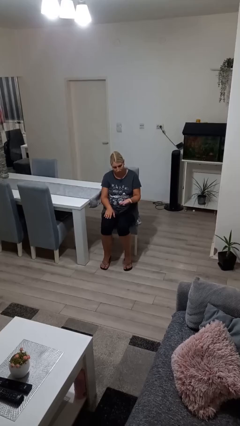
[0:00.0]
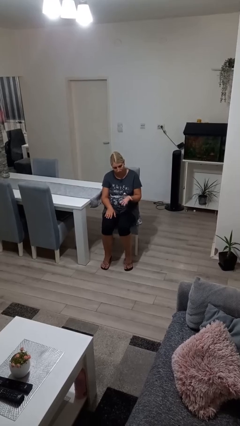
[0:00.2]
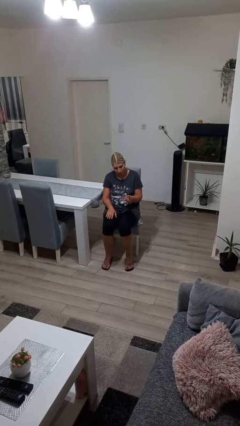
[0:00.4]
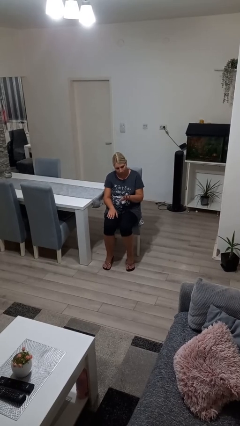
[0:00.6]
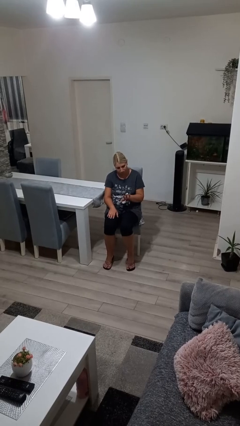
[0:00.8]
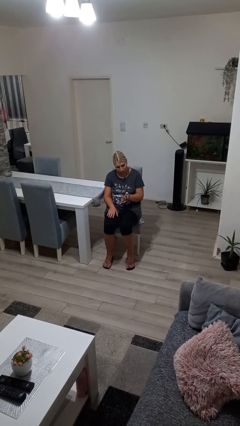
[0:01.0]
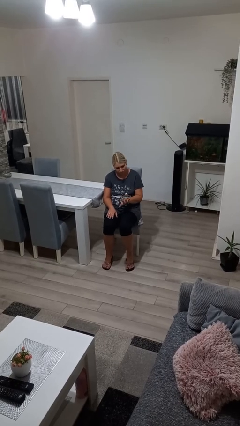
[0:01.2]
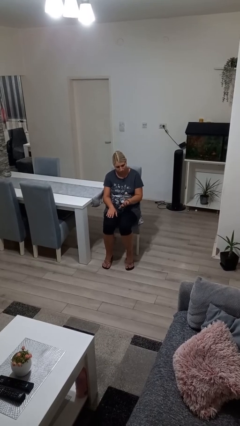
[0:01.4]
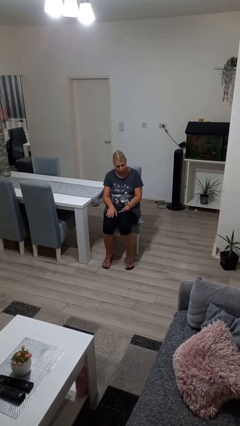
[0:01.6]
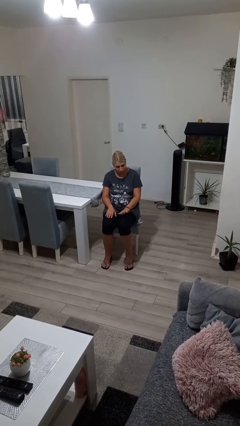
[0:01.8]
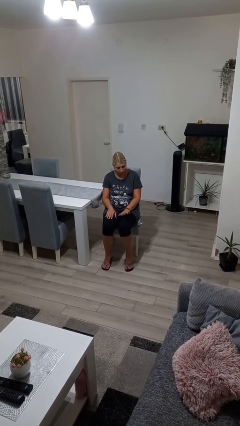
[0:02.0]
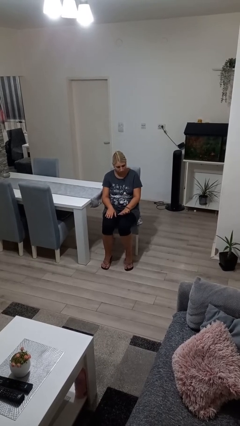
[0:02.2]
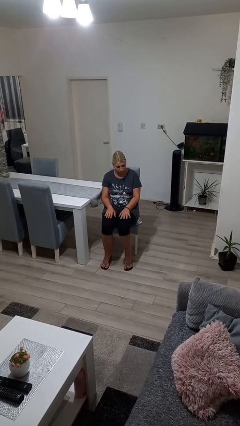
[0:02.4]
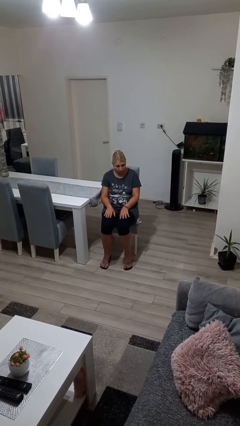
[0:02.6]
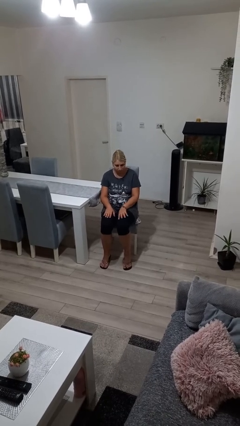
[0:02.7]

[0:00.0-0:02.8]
person looks at hands in lap

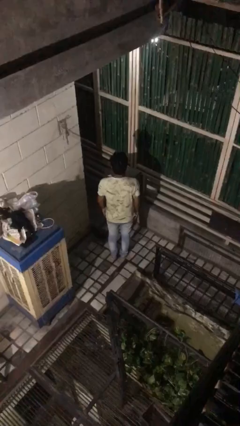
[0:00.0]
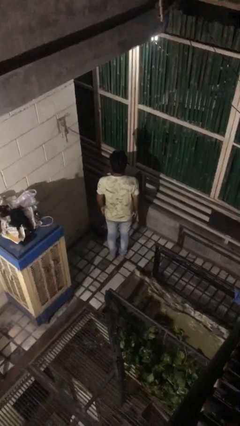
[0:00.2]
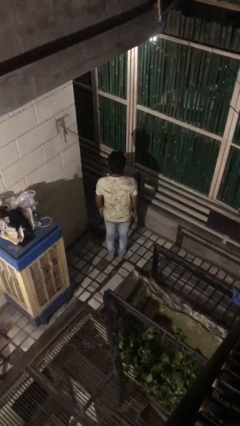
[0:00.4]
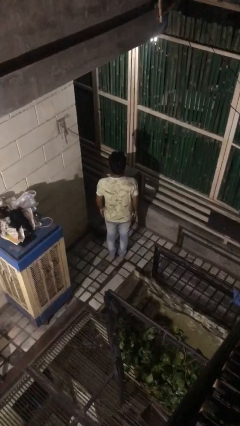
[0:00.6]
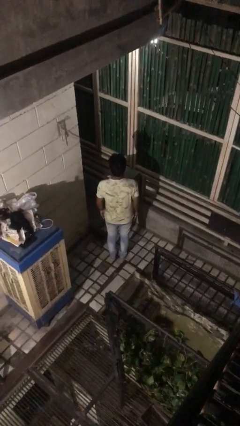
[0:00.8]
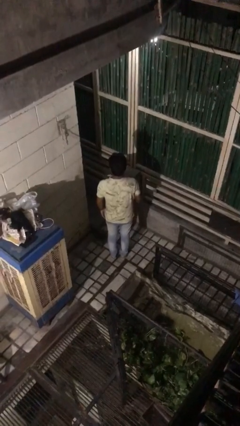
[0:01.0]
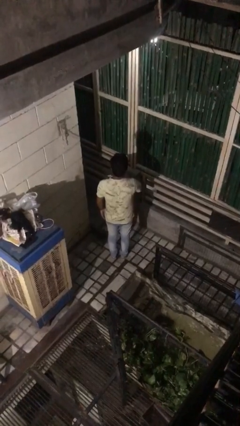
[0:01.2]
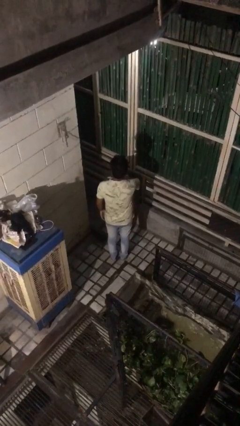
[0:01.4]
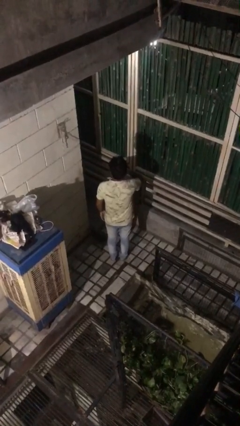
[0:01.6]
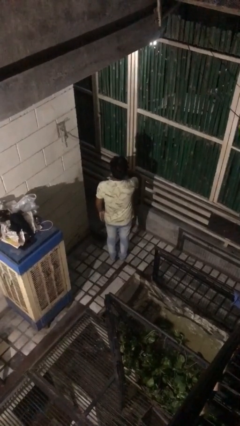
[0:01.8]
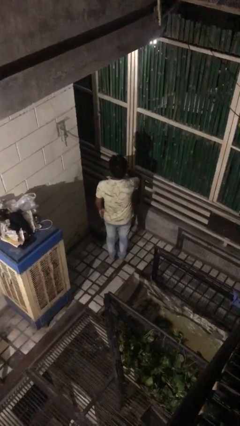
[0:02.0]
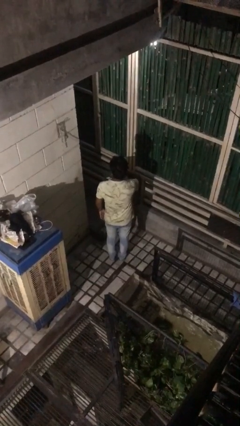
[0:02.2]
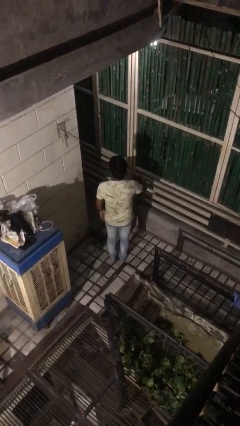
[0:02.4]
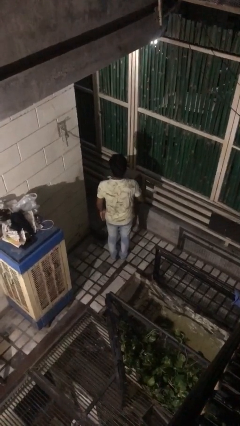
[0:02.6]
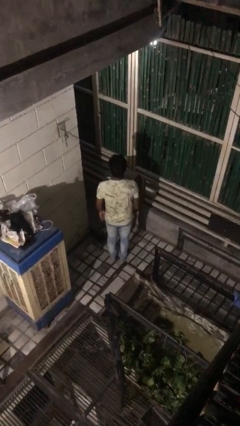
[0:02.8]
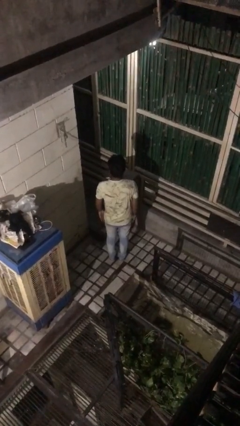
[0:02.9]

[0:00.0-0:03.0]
person gestures cut

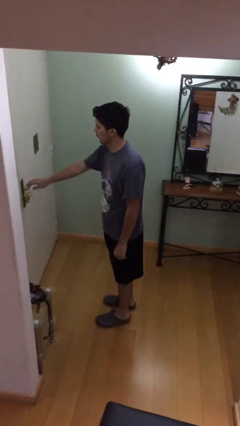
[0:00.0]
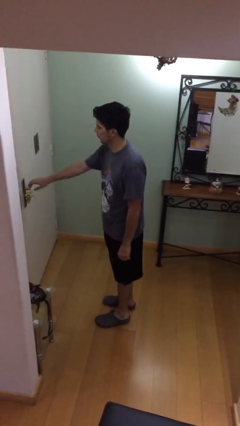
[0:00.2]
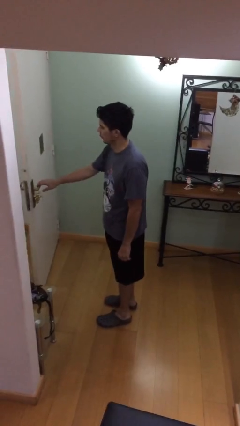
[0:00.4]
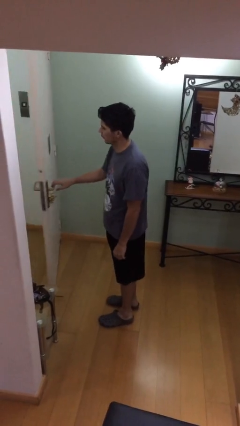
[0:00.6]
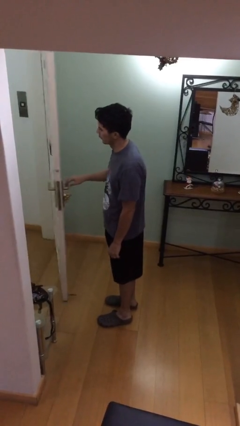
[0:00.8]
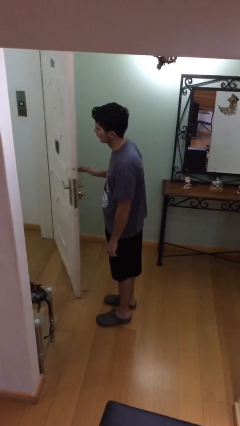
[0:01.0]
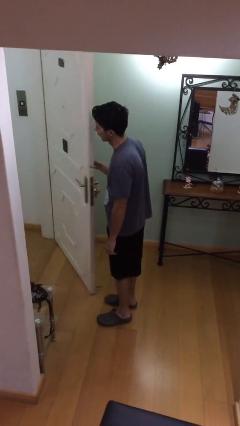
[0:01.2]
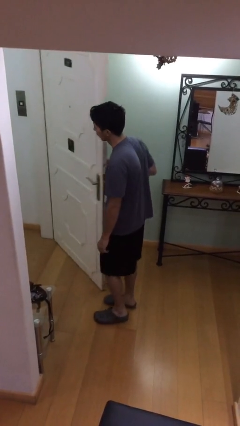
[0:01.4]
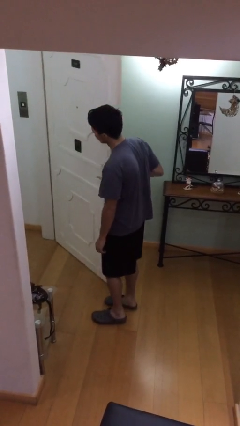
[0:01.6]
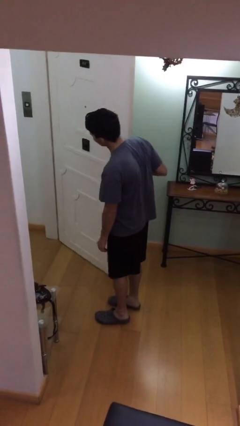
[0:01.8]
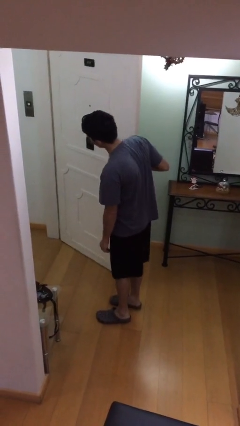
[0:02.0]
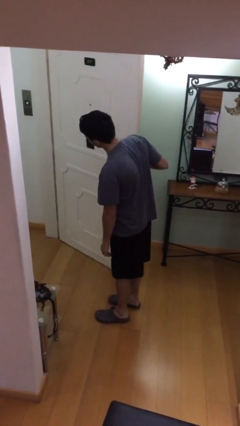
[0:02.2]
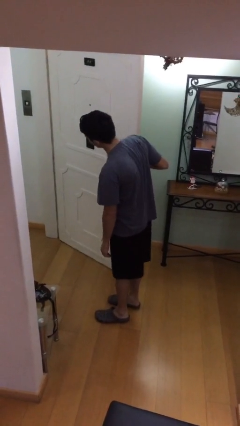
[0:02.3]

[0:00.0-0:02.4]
person opens facility door

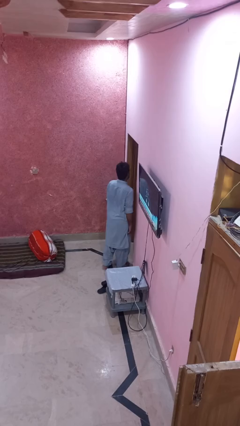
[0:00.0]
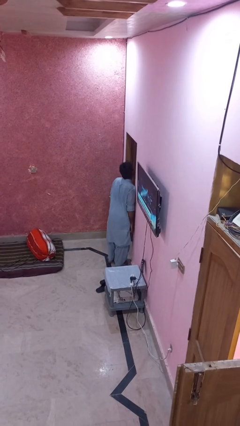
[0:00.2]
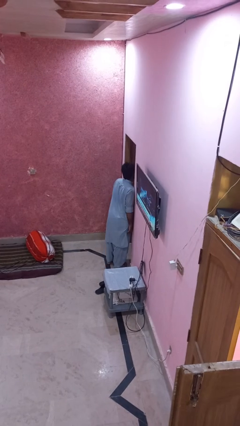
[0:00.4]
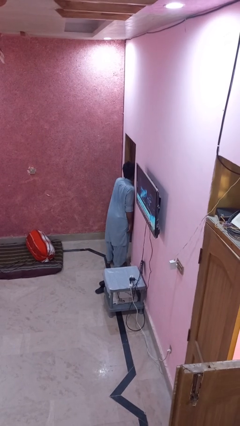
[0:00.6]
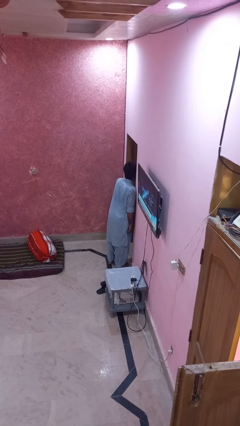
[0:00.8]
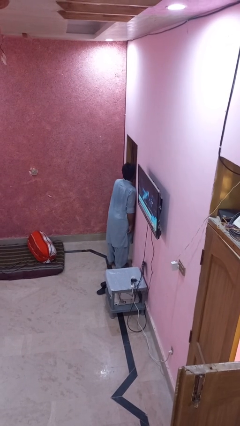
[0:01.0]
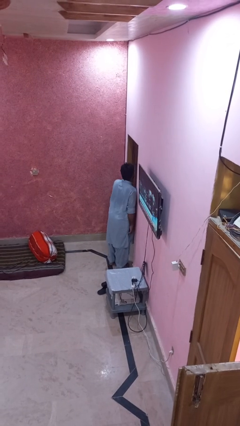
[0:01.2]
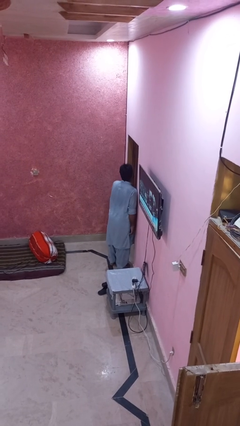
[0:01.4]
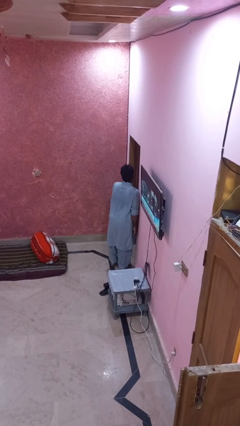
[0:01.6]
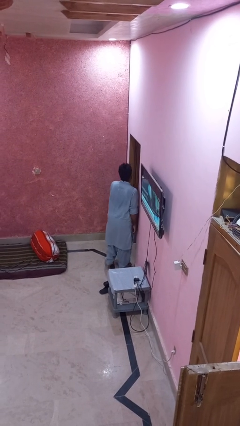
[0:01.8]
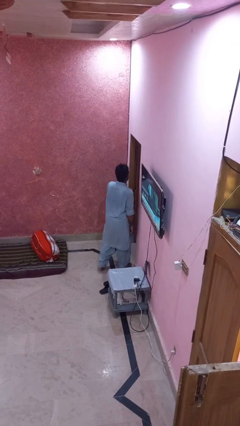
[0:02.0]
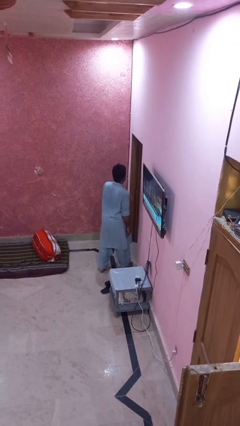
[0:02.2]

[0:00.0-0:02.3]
person bumps into wall

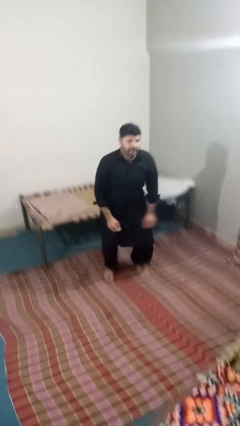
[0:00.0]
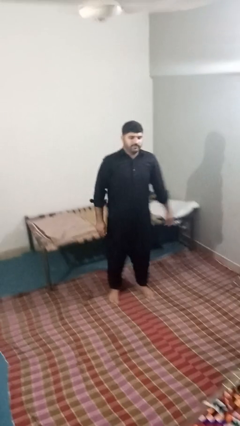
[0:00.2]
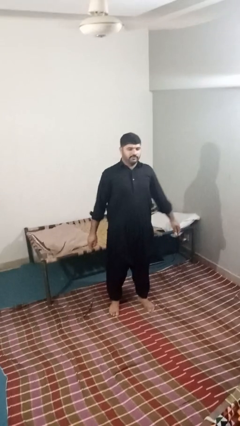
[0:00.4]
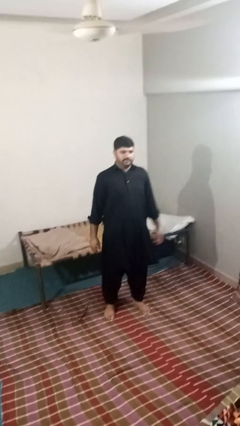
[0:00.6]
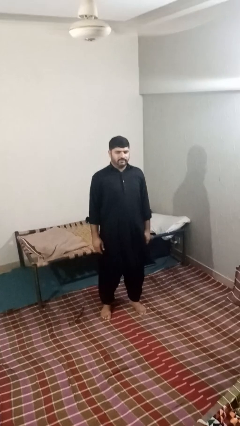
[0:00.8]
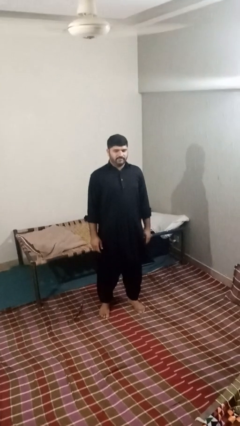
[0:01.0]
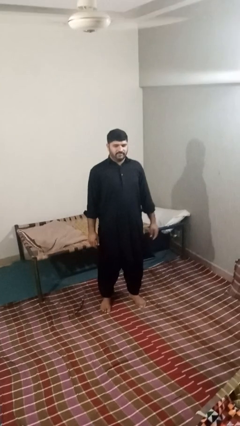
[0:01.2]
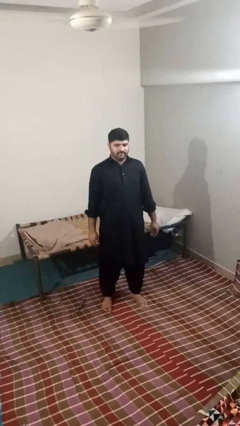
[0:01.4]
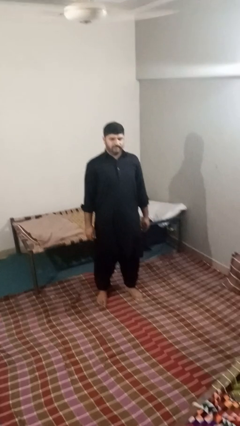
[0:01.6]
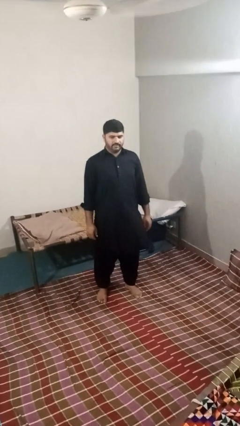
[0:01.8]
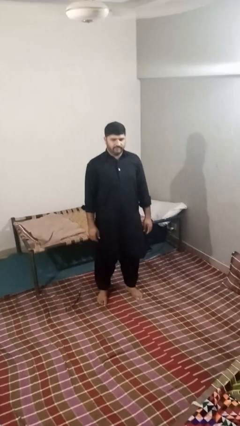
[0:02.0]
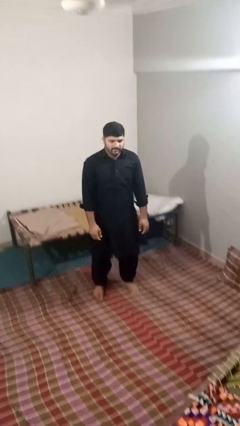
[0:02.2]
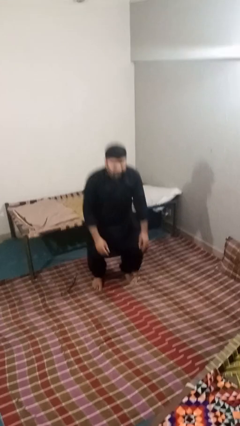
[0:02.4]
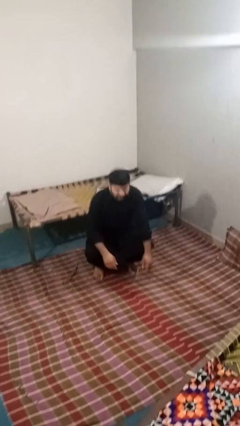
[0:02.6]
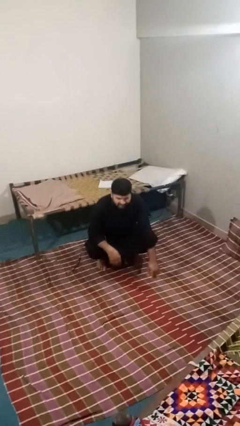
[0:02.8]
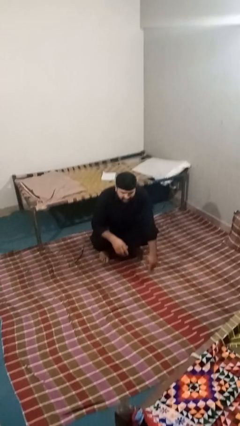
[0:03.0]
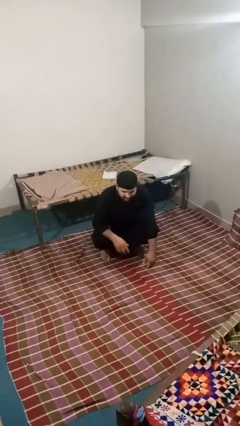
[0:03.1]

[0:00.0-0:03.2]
person stands up

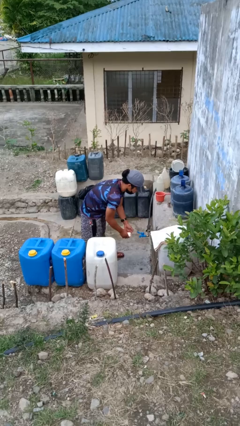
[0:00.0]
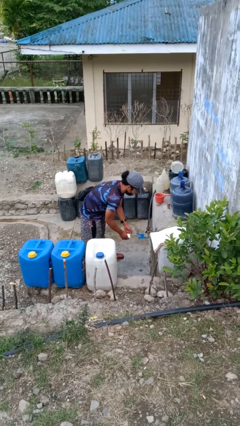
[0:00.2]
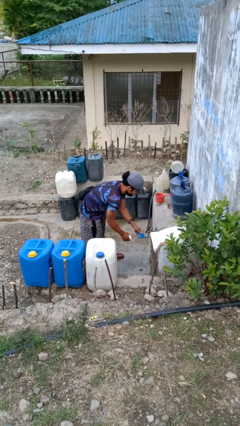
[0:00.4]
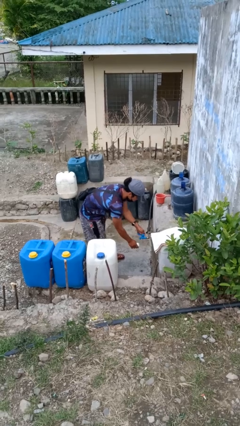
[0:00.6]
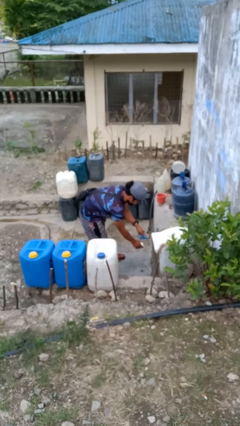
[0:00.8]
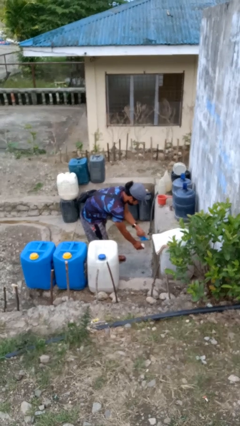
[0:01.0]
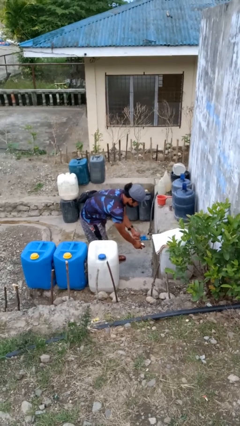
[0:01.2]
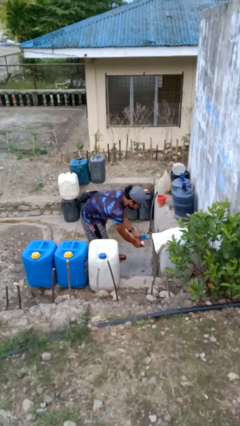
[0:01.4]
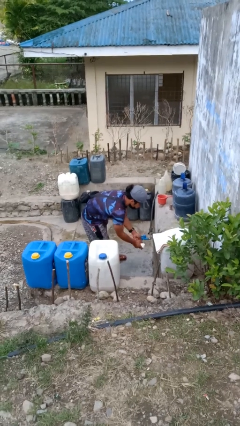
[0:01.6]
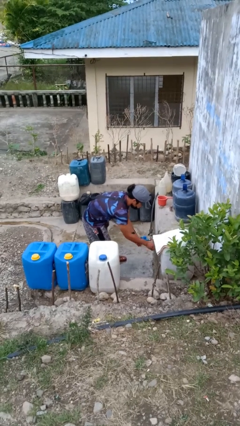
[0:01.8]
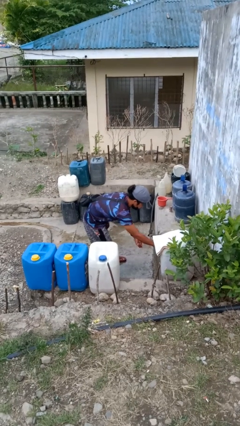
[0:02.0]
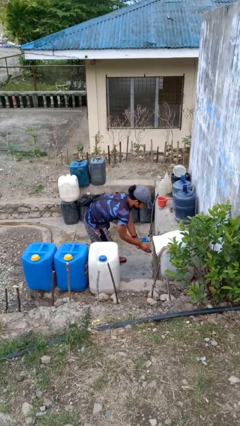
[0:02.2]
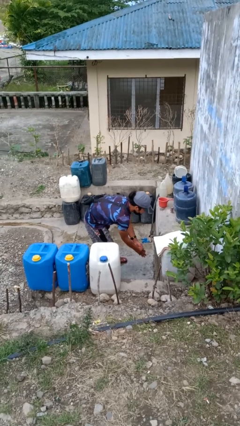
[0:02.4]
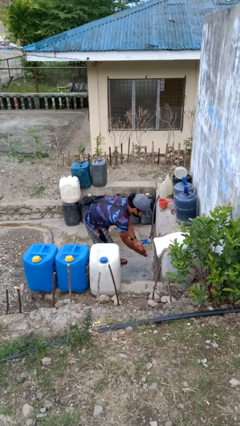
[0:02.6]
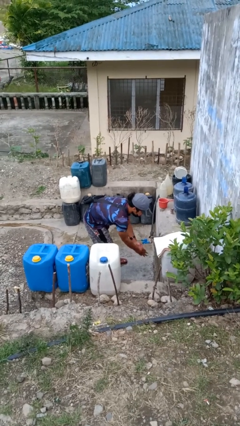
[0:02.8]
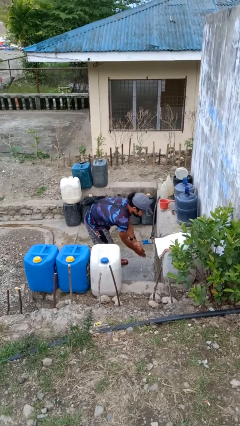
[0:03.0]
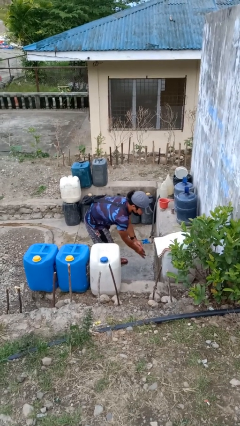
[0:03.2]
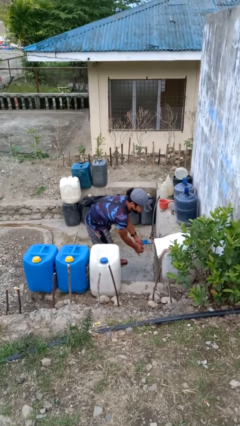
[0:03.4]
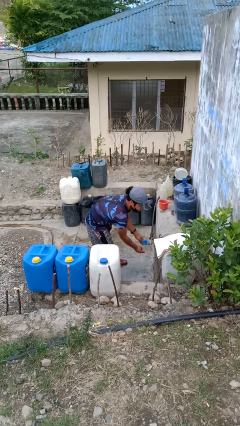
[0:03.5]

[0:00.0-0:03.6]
person washes hands
